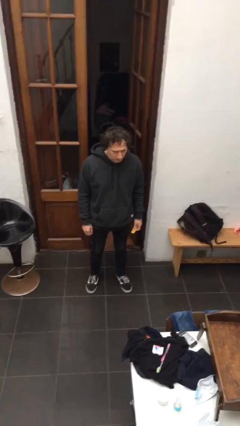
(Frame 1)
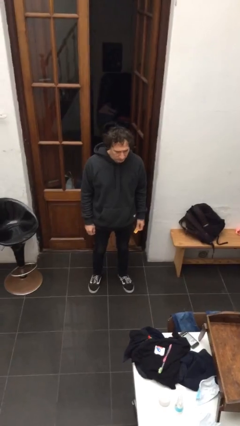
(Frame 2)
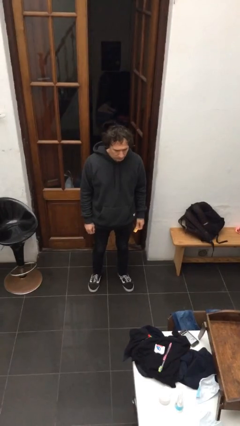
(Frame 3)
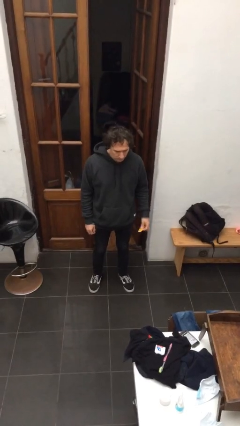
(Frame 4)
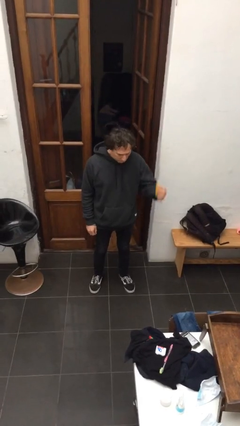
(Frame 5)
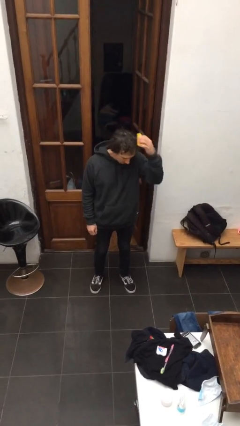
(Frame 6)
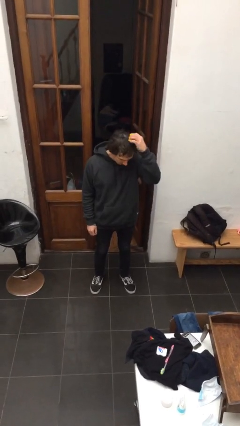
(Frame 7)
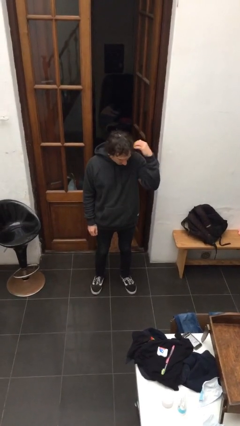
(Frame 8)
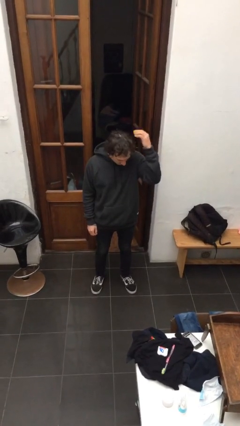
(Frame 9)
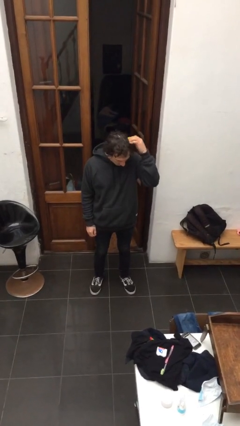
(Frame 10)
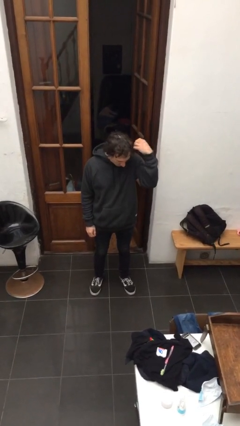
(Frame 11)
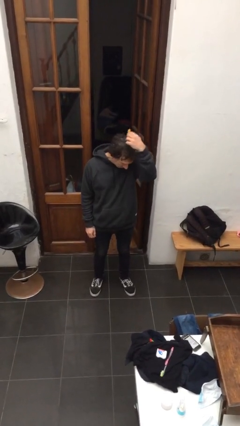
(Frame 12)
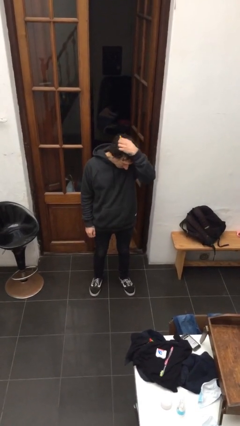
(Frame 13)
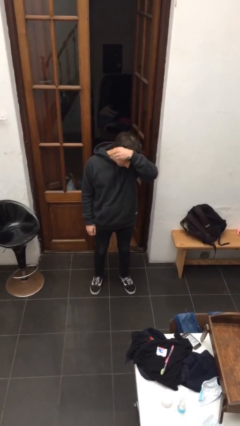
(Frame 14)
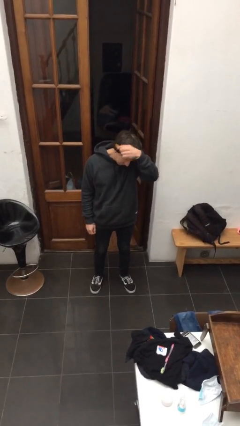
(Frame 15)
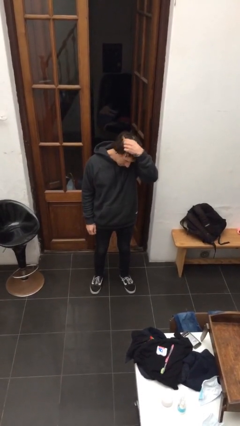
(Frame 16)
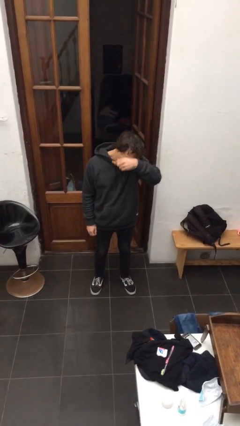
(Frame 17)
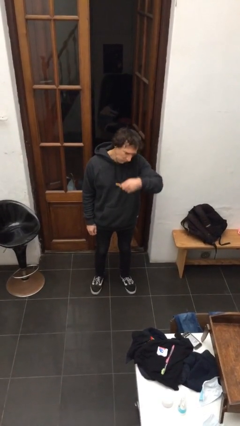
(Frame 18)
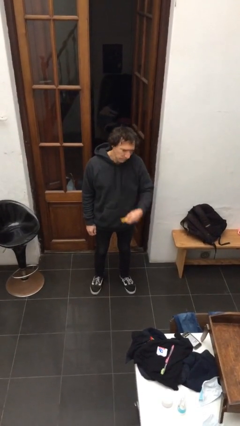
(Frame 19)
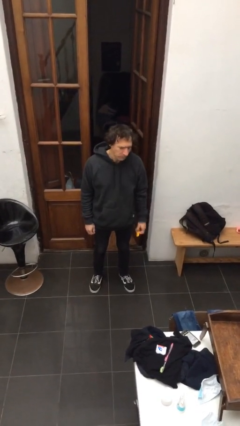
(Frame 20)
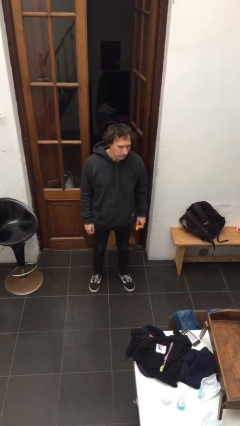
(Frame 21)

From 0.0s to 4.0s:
person brushes hair

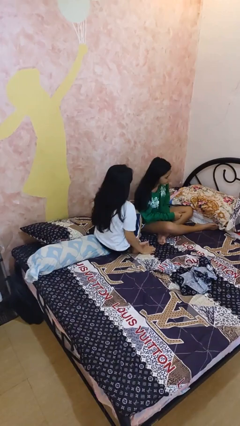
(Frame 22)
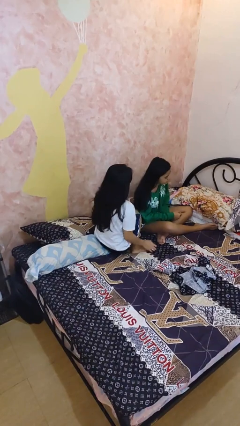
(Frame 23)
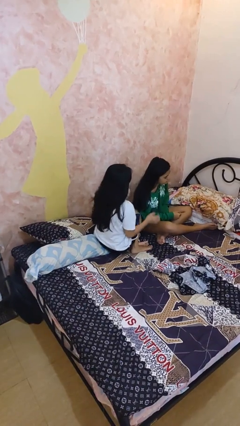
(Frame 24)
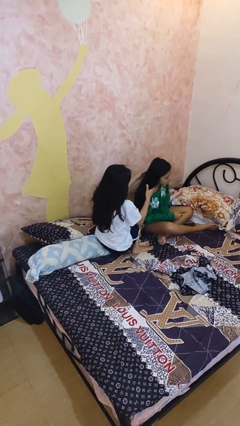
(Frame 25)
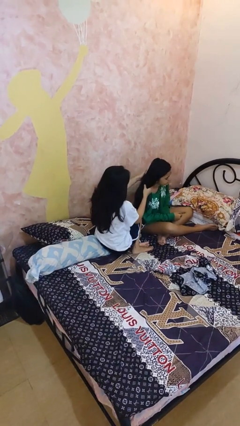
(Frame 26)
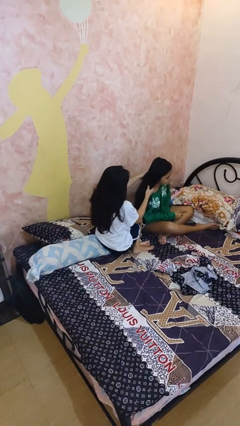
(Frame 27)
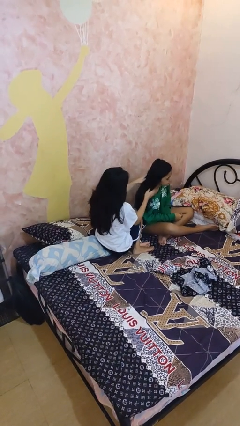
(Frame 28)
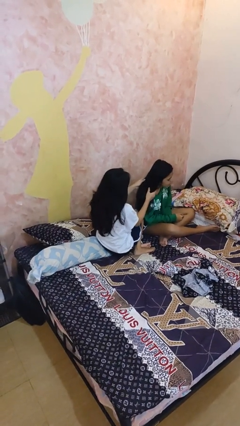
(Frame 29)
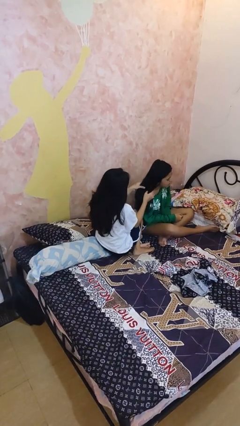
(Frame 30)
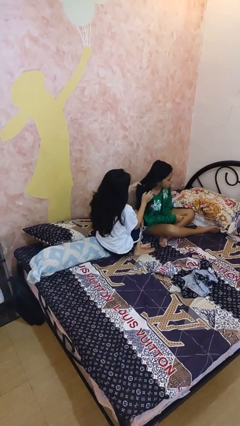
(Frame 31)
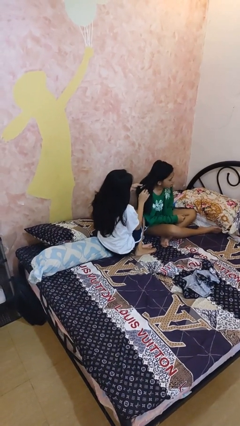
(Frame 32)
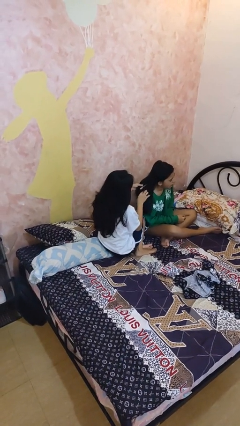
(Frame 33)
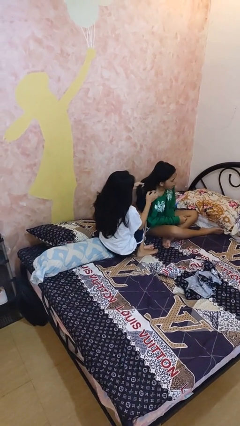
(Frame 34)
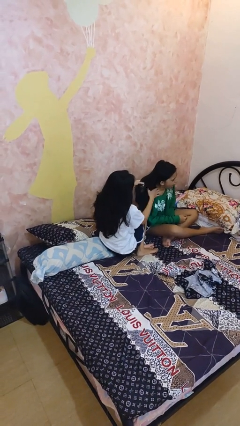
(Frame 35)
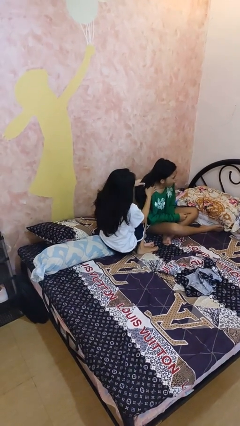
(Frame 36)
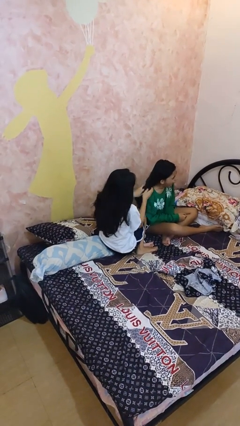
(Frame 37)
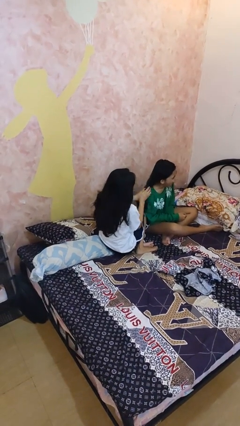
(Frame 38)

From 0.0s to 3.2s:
person braids hair of person

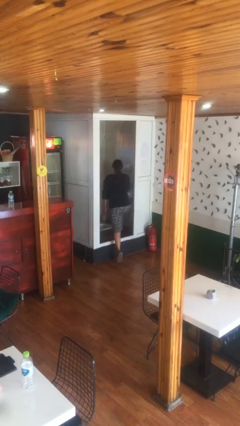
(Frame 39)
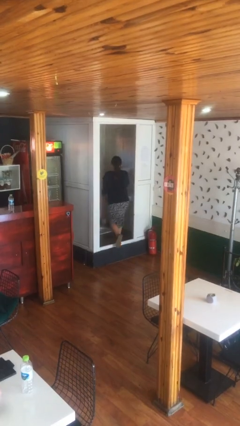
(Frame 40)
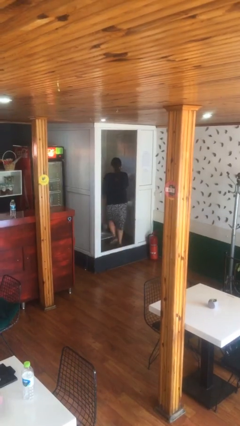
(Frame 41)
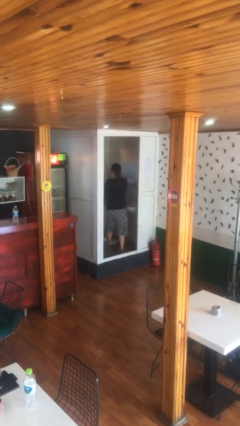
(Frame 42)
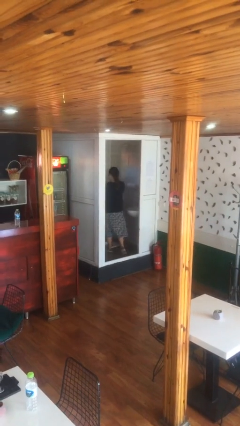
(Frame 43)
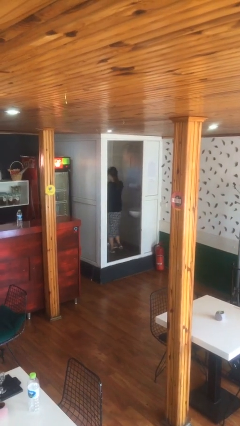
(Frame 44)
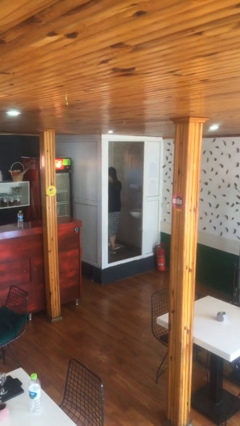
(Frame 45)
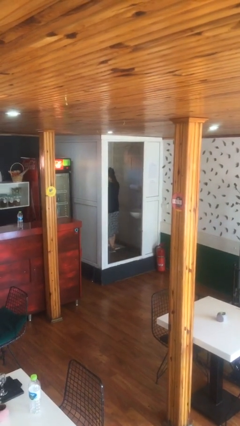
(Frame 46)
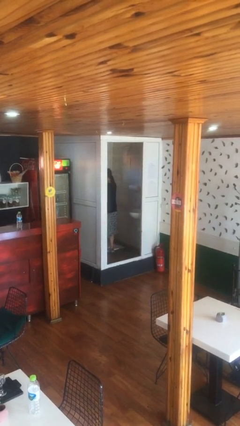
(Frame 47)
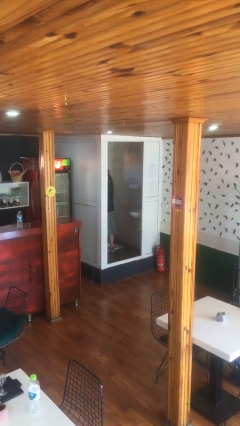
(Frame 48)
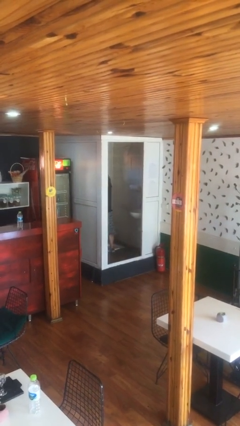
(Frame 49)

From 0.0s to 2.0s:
person exits scene through structure

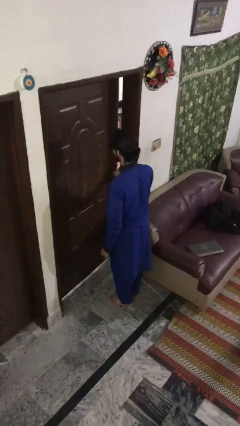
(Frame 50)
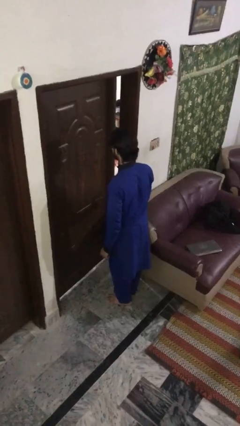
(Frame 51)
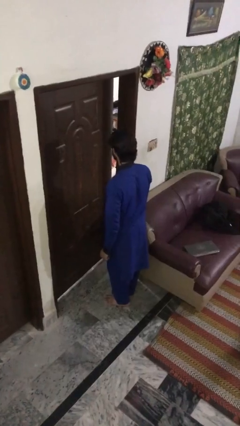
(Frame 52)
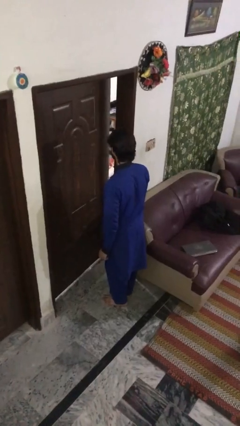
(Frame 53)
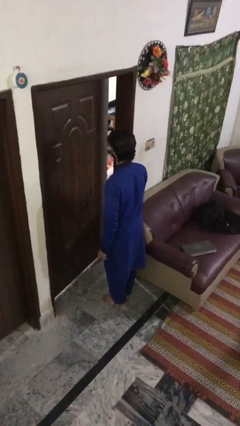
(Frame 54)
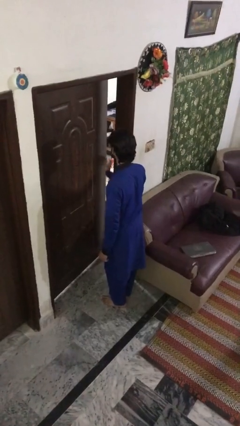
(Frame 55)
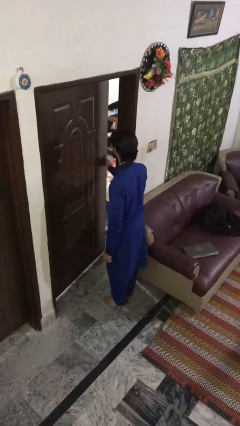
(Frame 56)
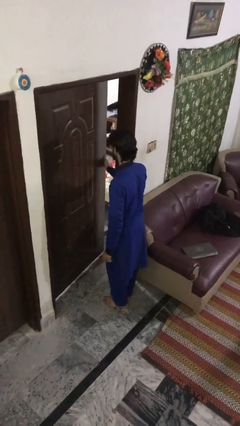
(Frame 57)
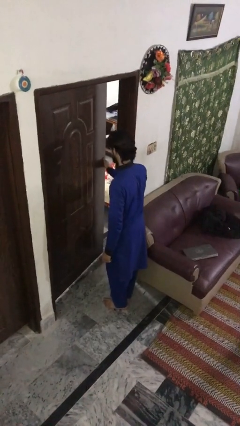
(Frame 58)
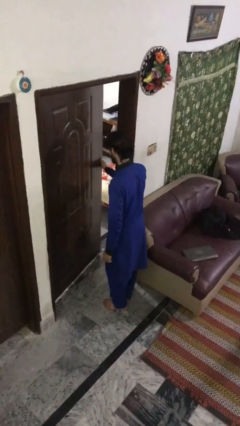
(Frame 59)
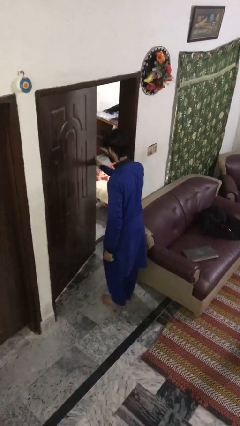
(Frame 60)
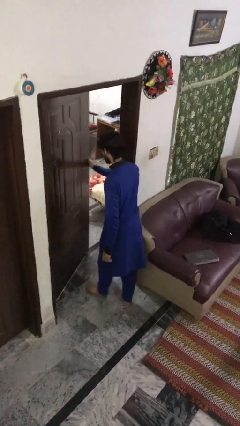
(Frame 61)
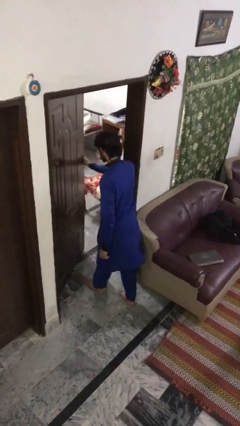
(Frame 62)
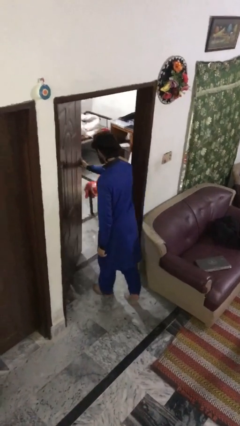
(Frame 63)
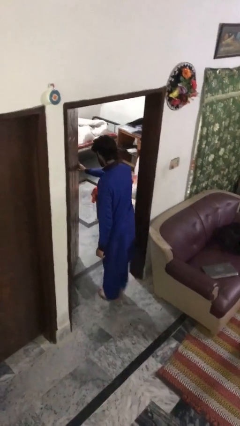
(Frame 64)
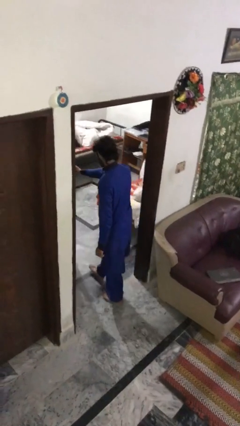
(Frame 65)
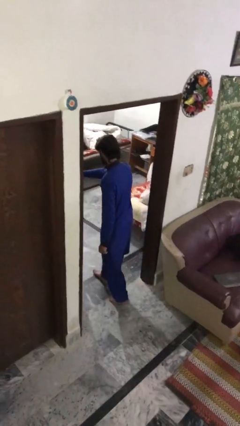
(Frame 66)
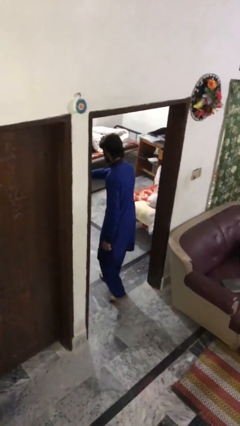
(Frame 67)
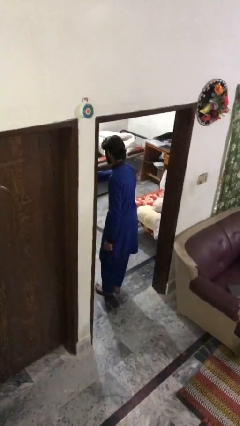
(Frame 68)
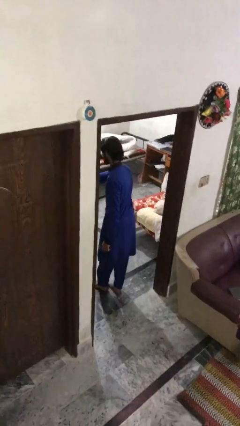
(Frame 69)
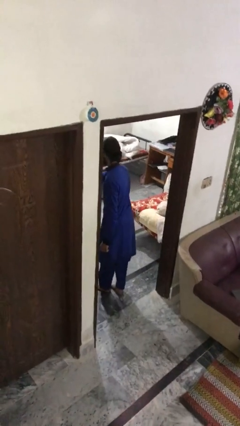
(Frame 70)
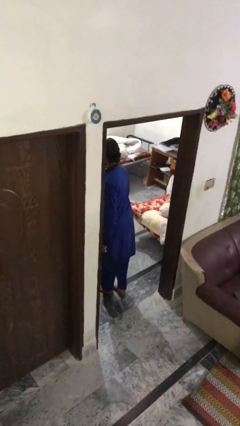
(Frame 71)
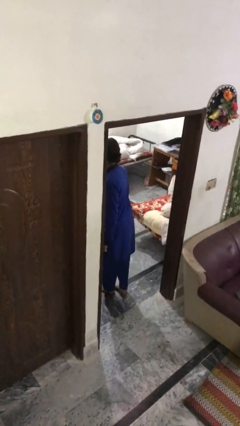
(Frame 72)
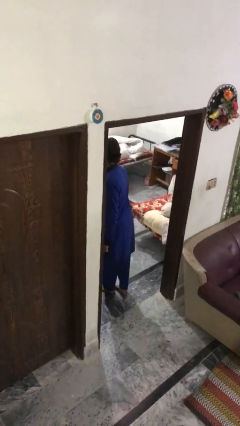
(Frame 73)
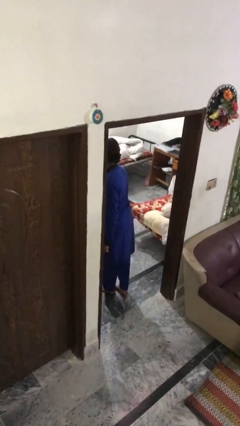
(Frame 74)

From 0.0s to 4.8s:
person opens facility door

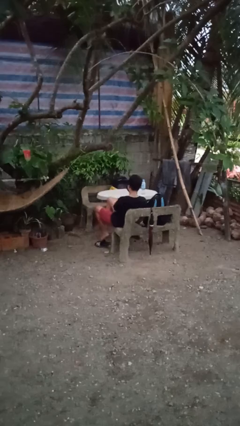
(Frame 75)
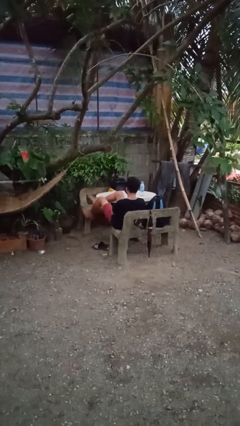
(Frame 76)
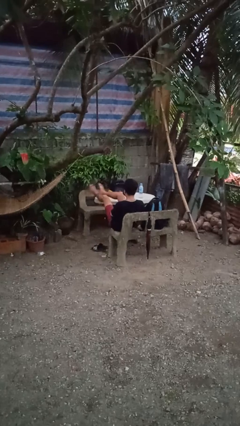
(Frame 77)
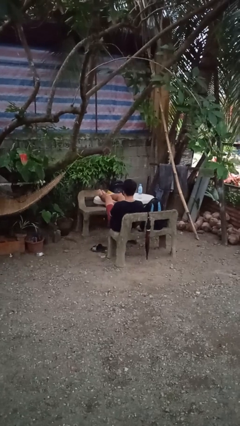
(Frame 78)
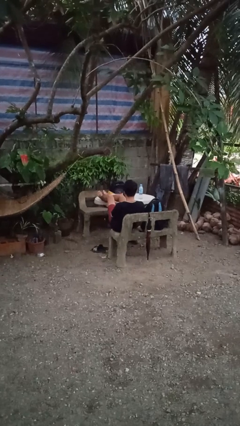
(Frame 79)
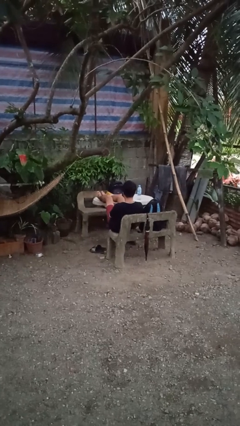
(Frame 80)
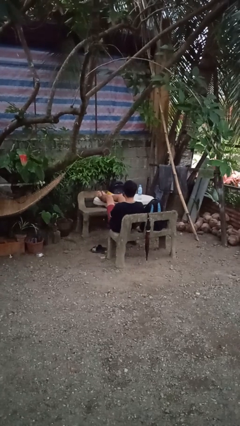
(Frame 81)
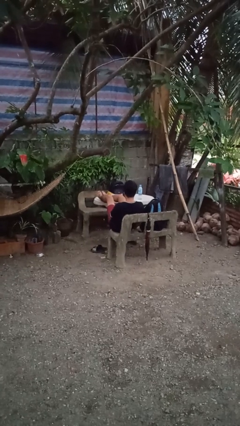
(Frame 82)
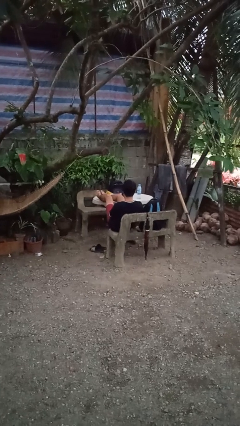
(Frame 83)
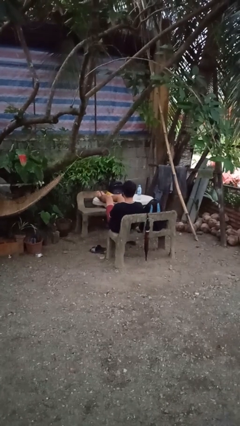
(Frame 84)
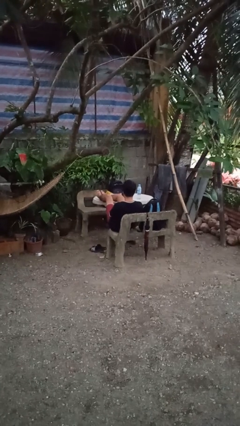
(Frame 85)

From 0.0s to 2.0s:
person puts feet up

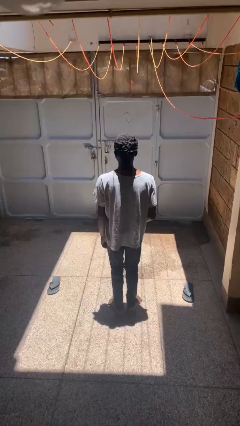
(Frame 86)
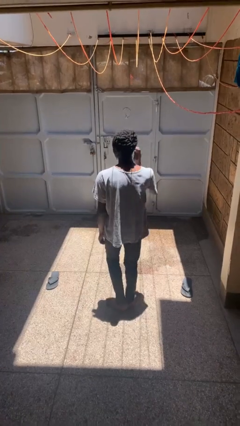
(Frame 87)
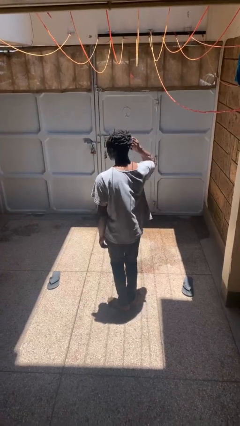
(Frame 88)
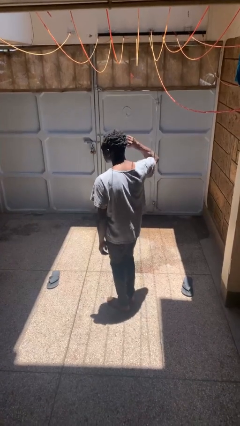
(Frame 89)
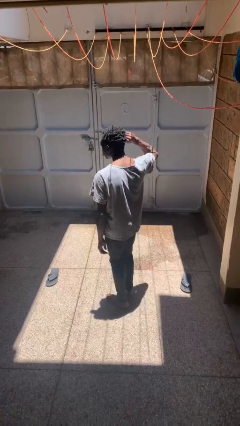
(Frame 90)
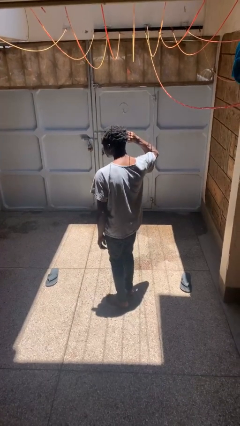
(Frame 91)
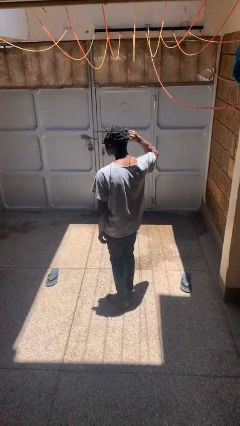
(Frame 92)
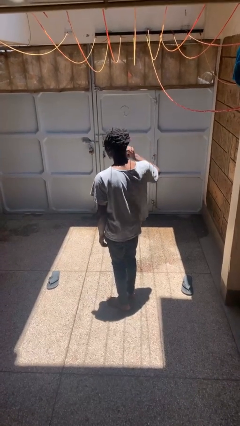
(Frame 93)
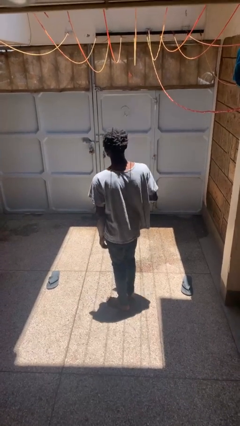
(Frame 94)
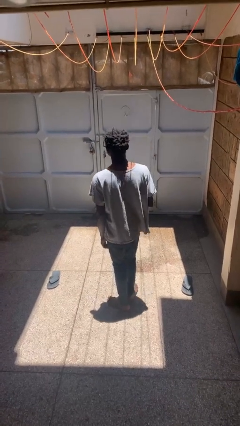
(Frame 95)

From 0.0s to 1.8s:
person touches earlobe
